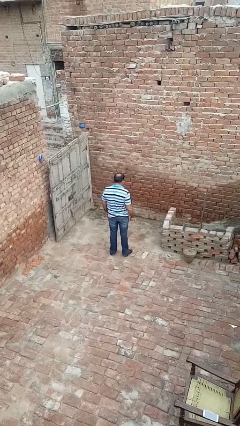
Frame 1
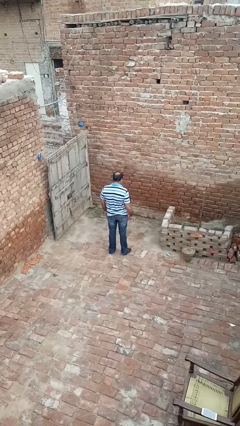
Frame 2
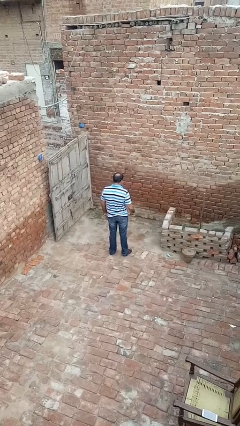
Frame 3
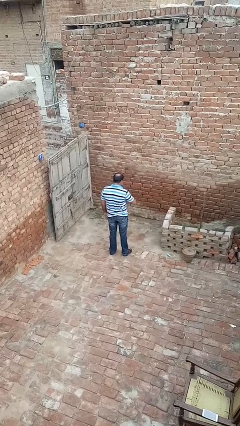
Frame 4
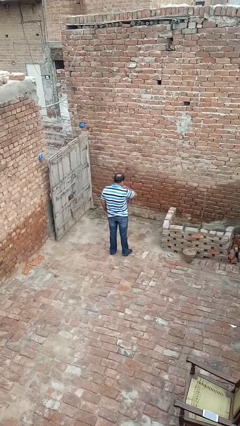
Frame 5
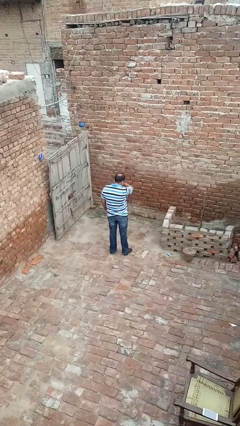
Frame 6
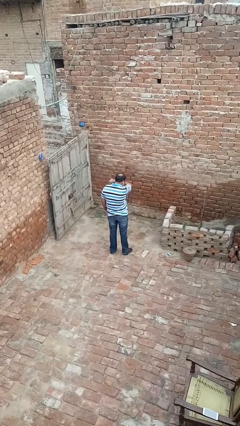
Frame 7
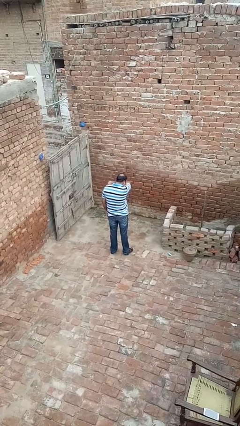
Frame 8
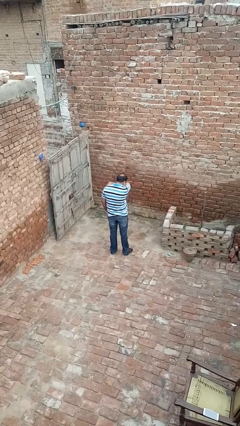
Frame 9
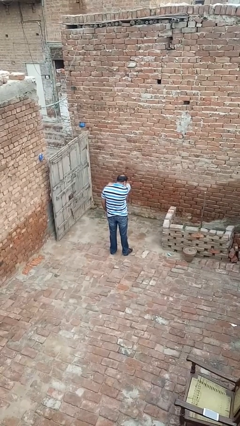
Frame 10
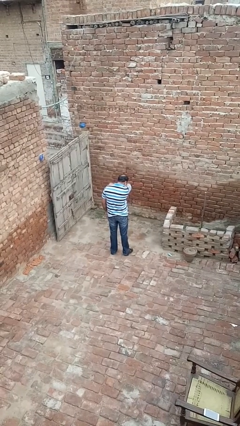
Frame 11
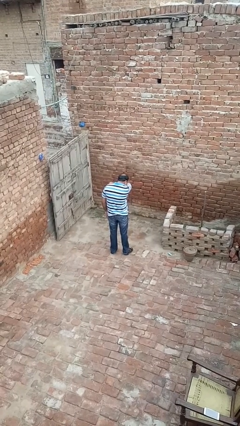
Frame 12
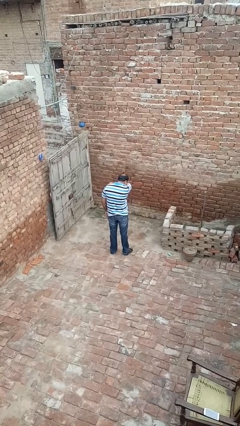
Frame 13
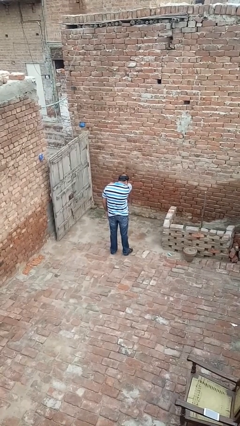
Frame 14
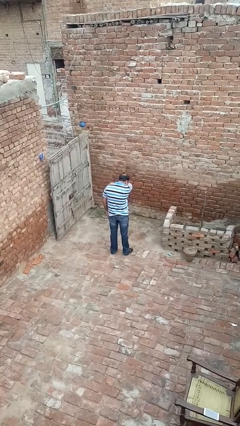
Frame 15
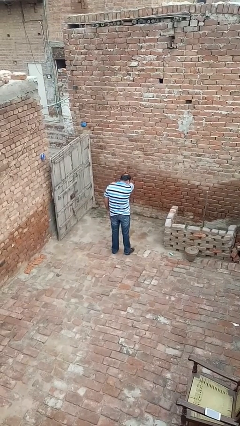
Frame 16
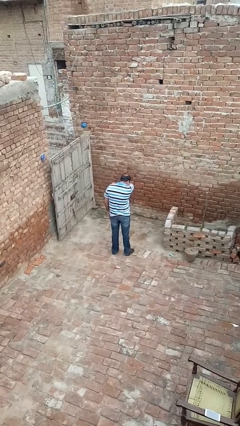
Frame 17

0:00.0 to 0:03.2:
person sneezes into arm

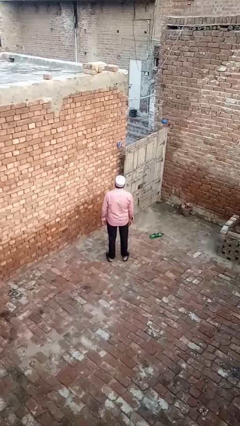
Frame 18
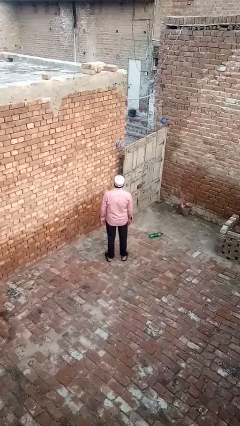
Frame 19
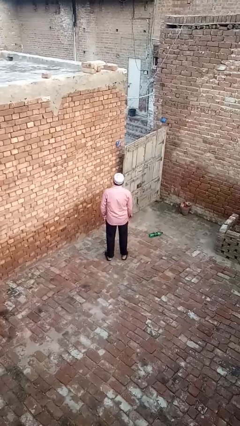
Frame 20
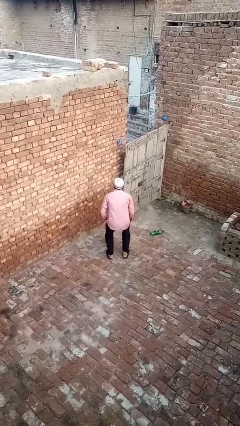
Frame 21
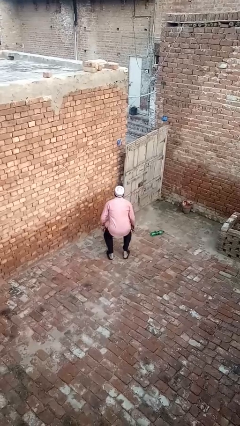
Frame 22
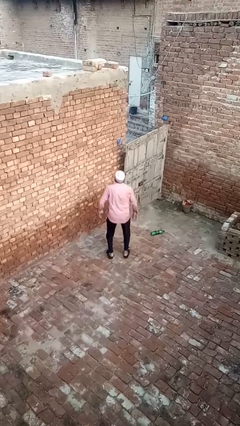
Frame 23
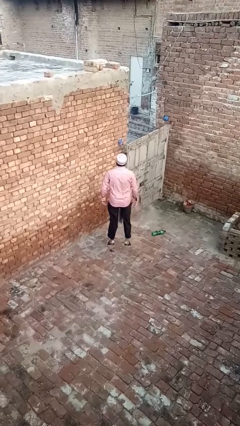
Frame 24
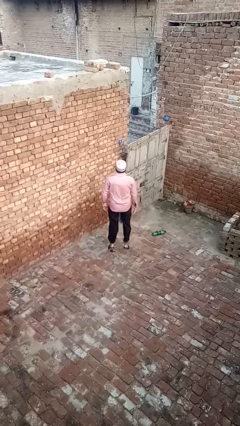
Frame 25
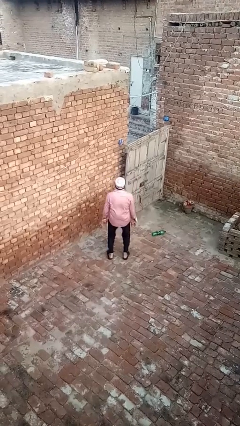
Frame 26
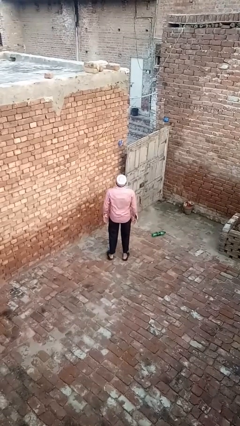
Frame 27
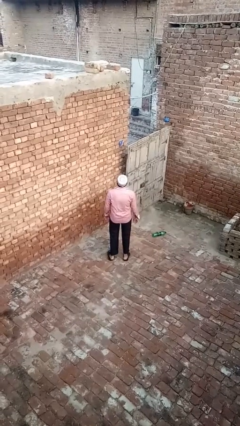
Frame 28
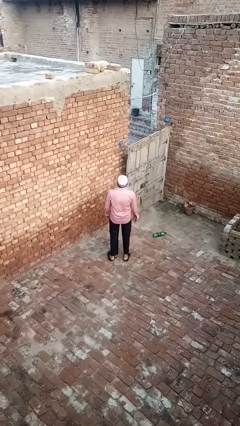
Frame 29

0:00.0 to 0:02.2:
person jumps

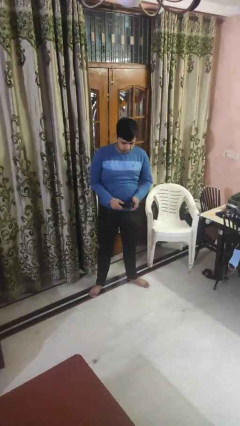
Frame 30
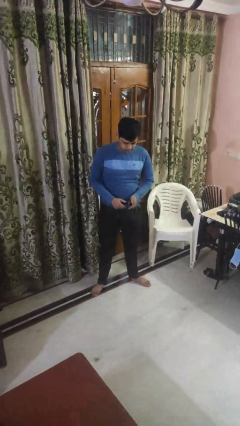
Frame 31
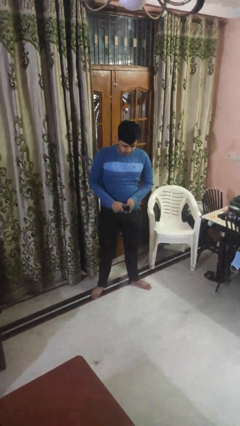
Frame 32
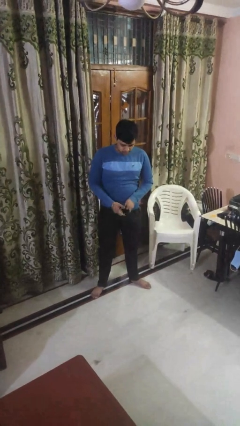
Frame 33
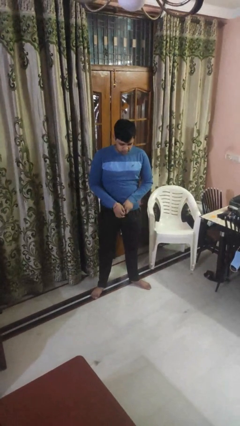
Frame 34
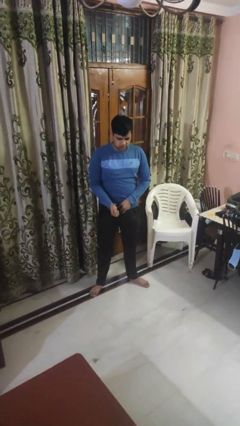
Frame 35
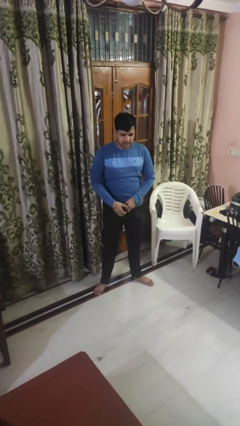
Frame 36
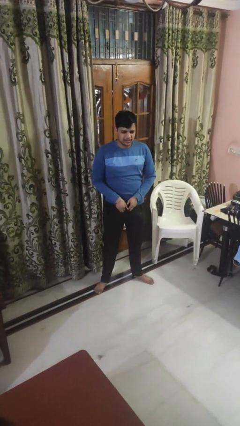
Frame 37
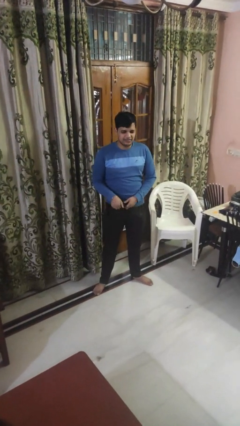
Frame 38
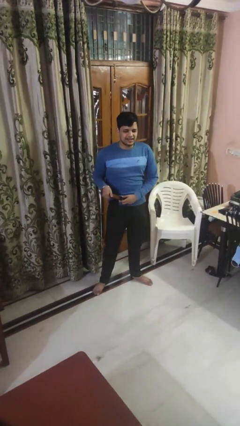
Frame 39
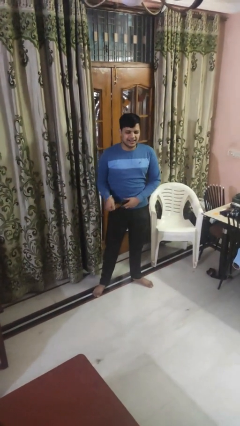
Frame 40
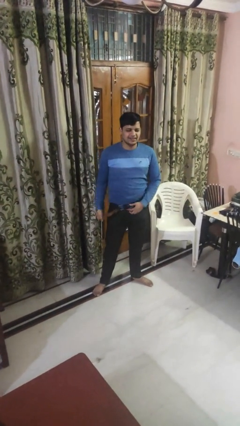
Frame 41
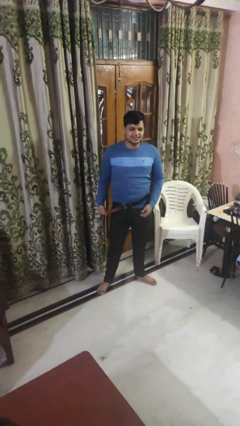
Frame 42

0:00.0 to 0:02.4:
person puts on belt

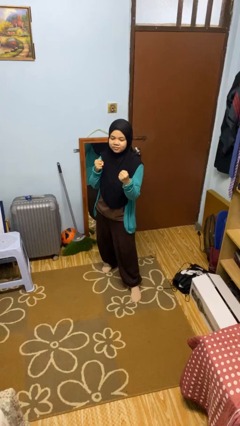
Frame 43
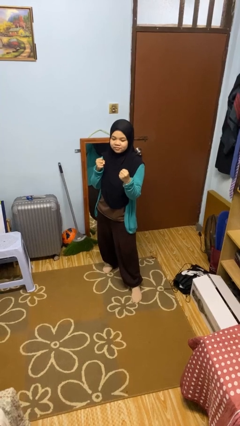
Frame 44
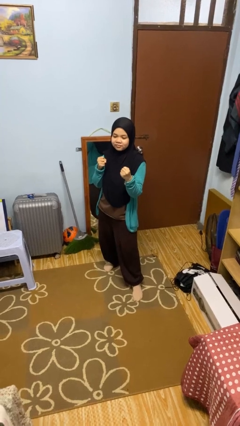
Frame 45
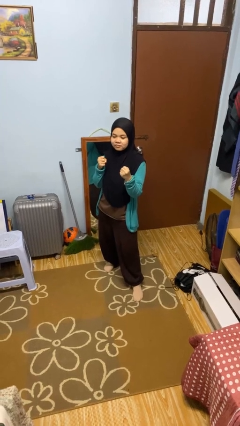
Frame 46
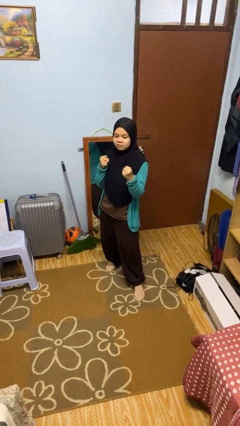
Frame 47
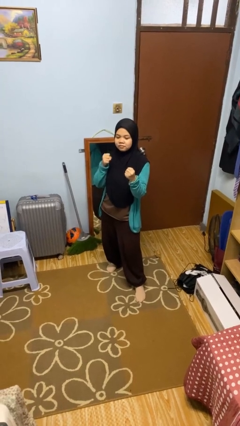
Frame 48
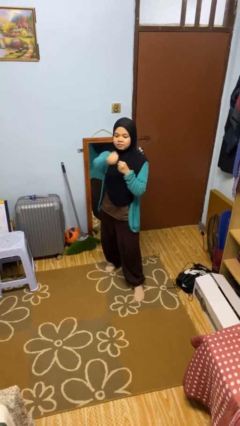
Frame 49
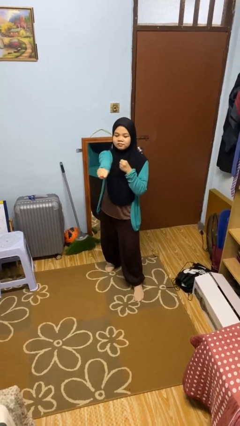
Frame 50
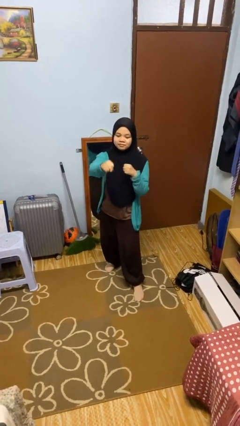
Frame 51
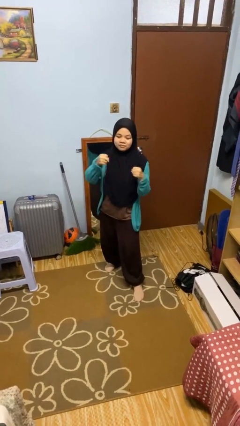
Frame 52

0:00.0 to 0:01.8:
person punches

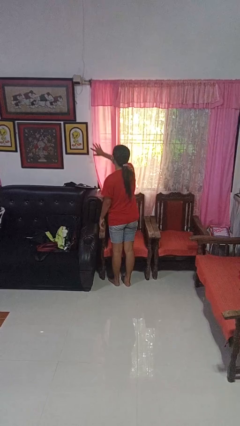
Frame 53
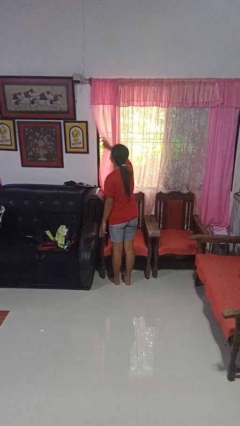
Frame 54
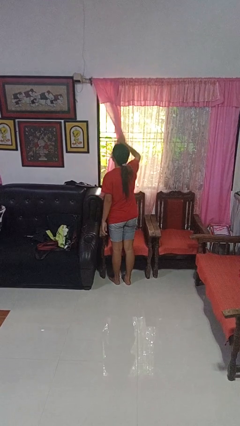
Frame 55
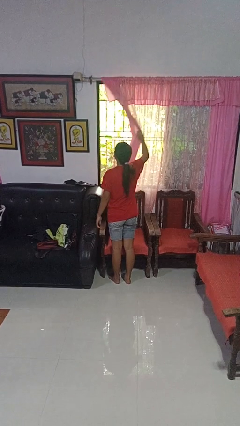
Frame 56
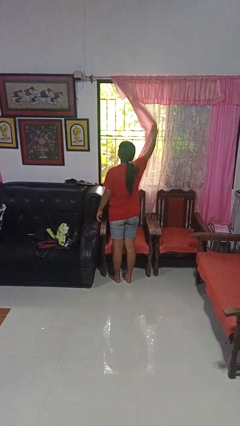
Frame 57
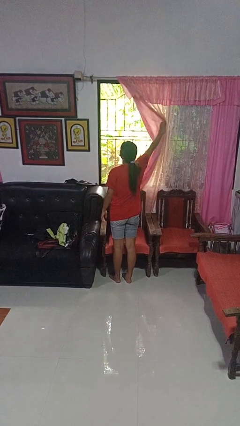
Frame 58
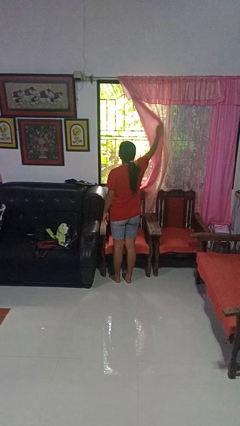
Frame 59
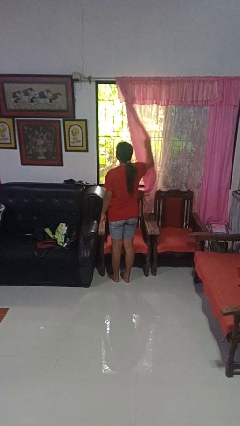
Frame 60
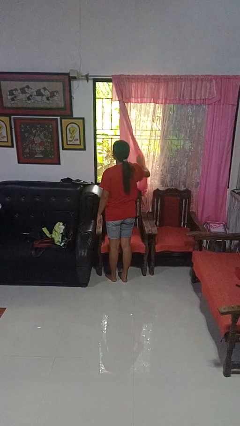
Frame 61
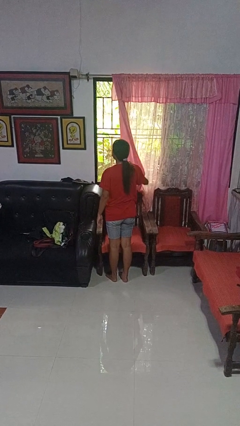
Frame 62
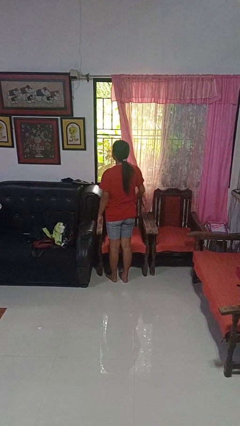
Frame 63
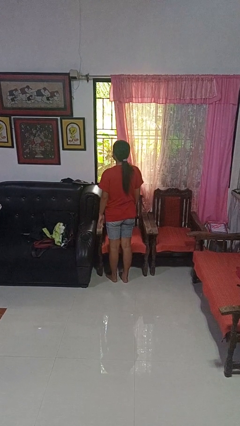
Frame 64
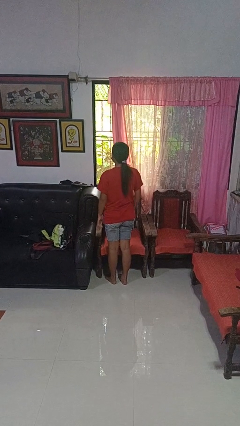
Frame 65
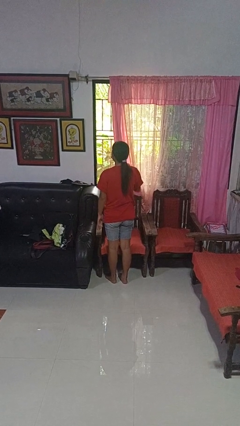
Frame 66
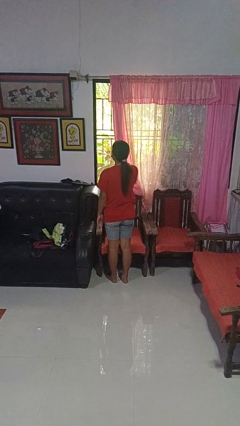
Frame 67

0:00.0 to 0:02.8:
person opens curtains

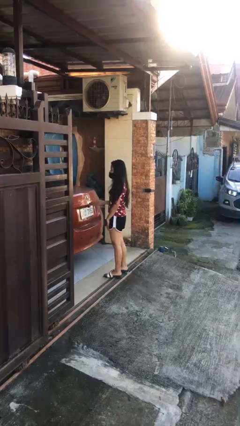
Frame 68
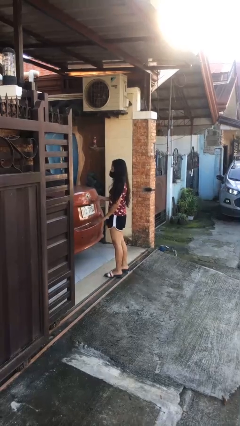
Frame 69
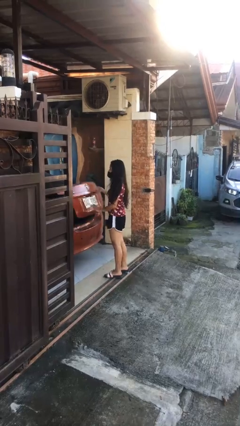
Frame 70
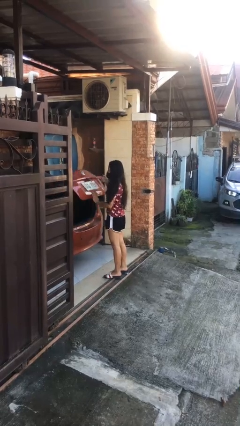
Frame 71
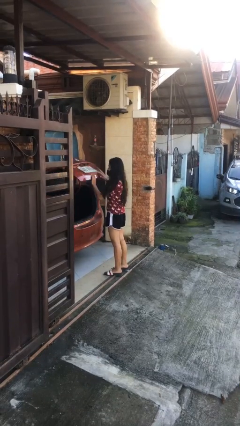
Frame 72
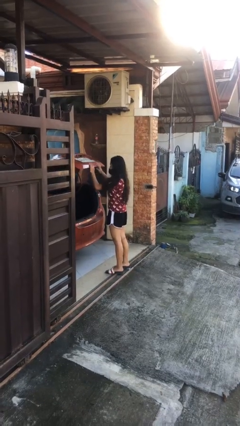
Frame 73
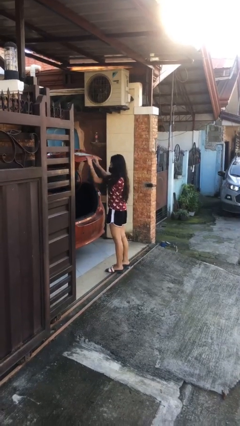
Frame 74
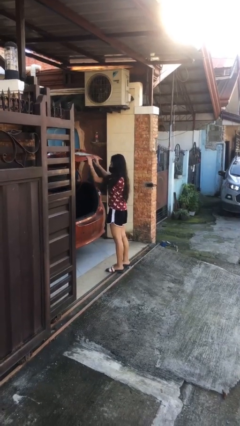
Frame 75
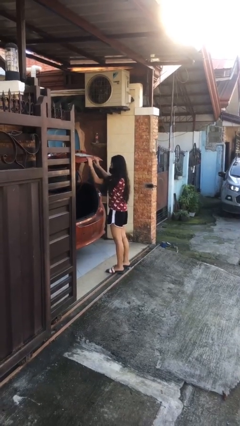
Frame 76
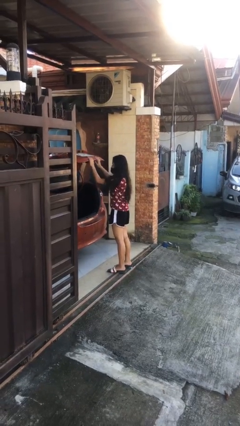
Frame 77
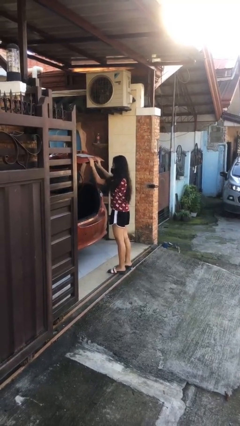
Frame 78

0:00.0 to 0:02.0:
person opens car trunk

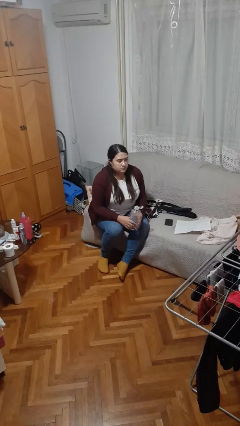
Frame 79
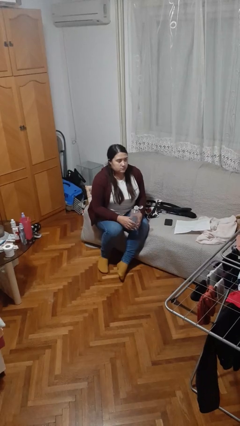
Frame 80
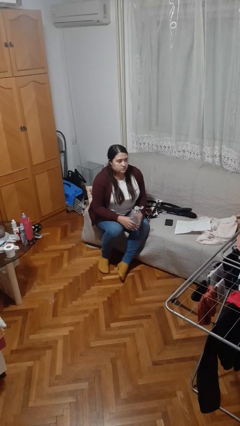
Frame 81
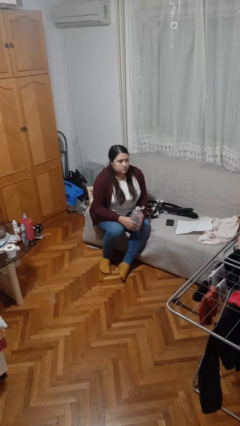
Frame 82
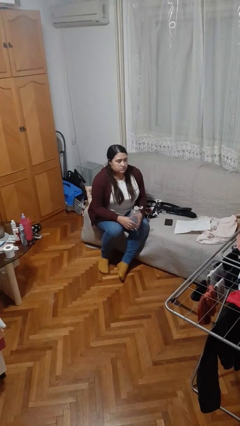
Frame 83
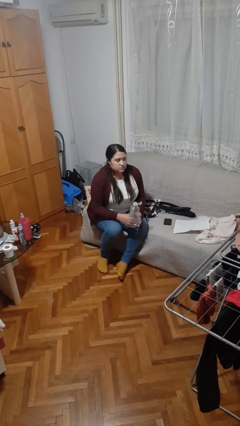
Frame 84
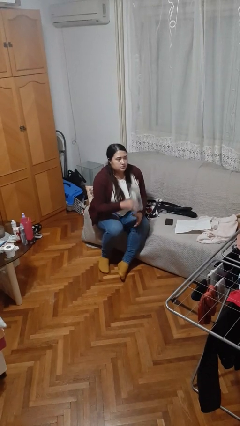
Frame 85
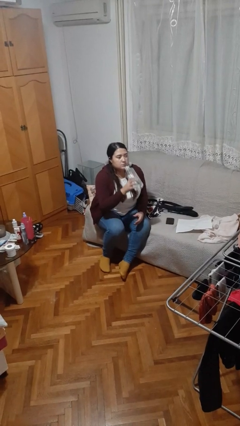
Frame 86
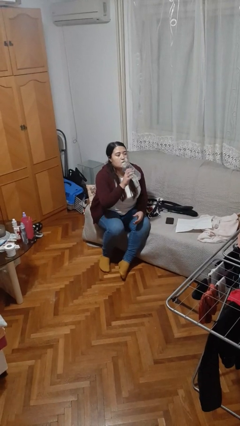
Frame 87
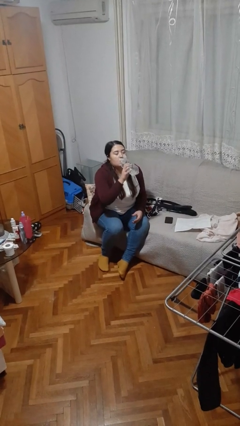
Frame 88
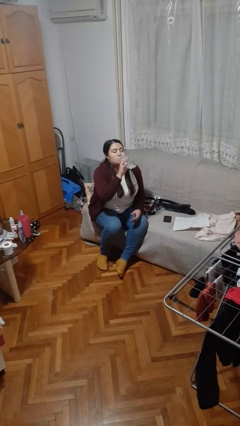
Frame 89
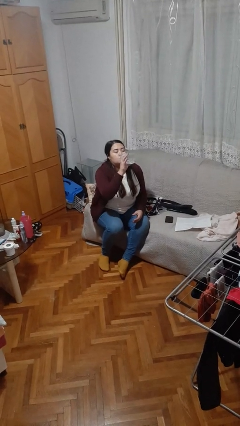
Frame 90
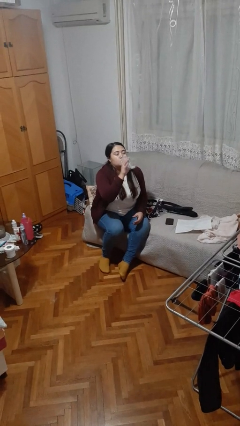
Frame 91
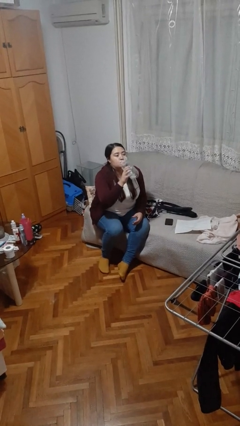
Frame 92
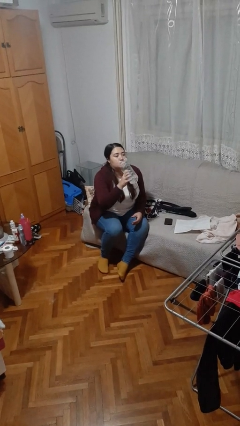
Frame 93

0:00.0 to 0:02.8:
person drinks from bottle
